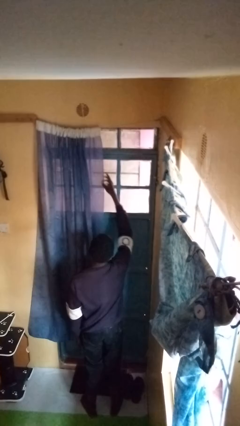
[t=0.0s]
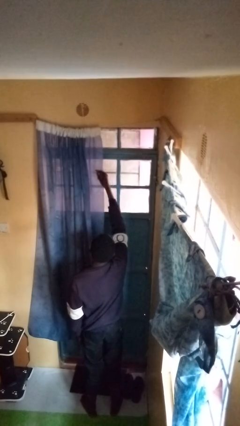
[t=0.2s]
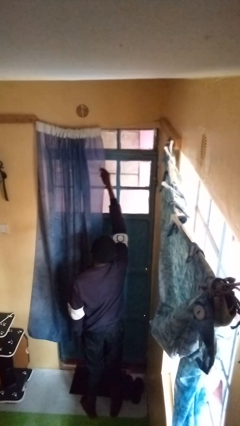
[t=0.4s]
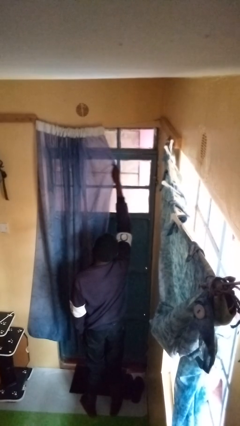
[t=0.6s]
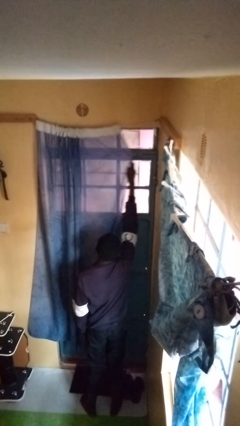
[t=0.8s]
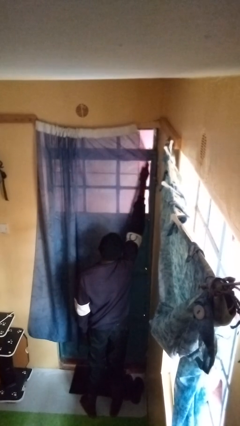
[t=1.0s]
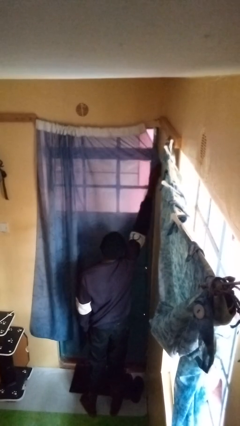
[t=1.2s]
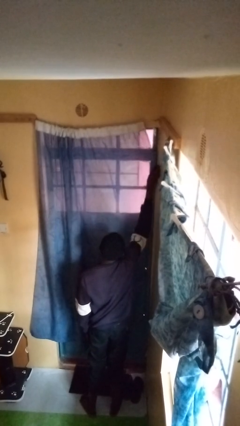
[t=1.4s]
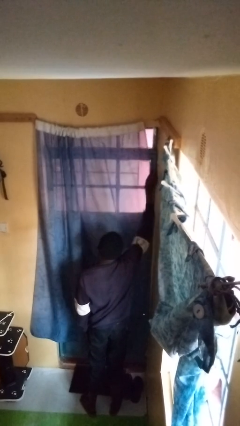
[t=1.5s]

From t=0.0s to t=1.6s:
person closes curtains

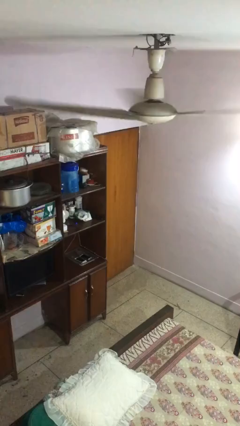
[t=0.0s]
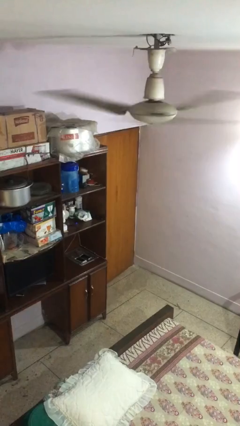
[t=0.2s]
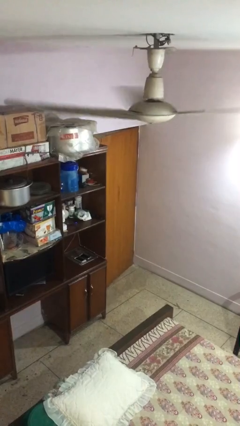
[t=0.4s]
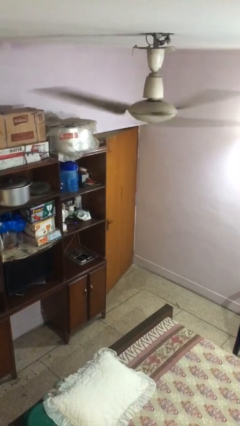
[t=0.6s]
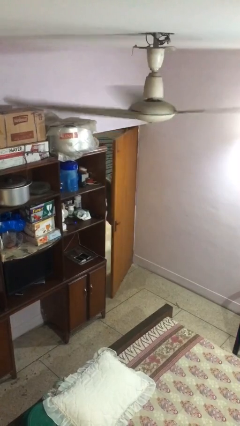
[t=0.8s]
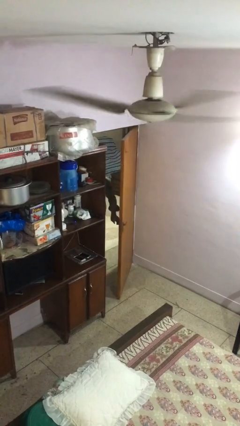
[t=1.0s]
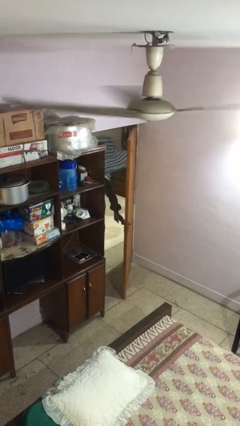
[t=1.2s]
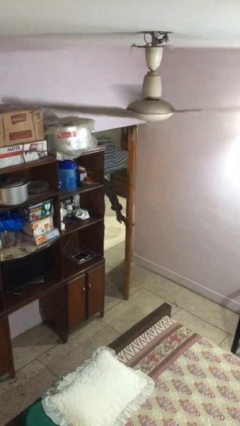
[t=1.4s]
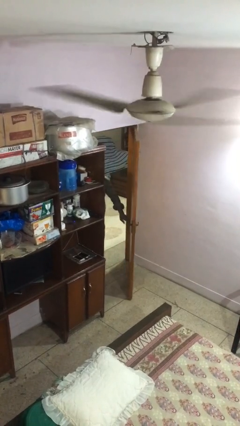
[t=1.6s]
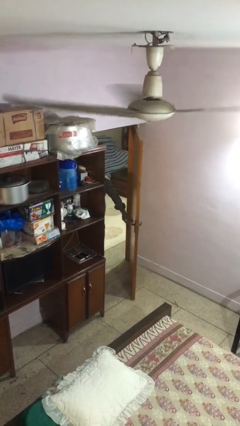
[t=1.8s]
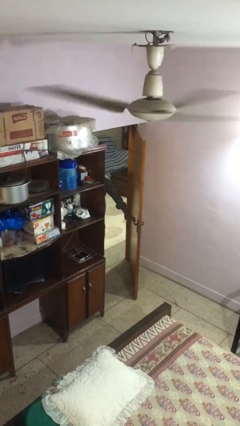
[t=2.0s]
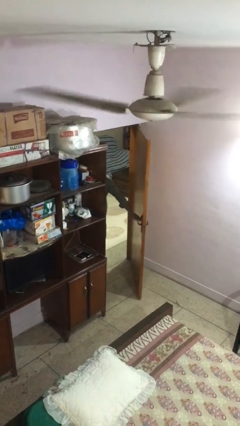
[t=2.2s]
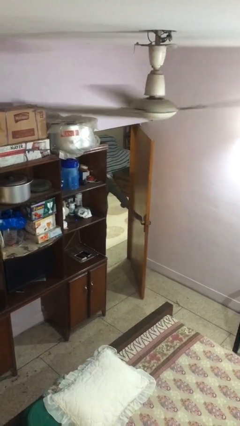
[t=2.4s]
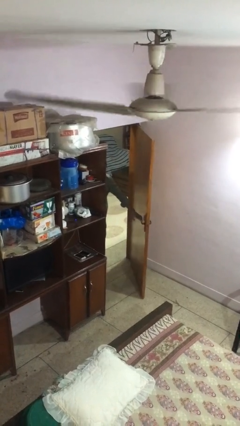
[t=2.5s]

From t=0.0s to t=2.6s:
person opens facility door

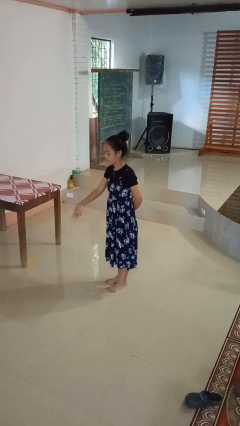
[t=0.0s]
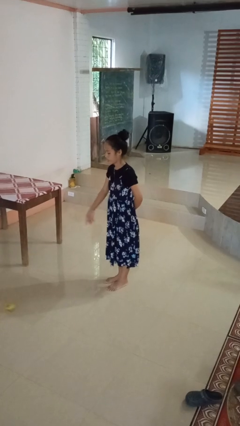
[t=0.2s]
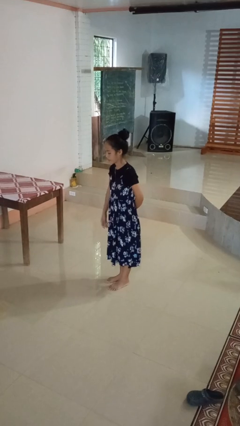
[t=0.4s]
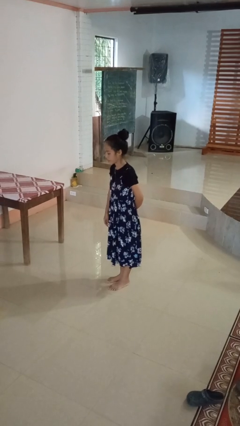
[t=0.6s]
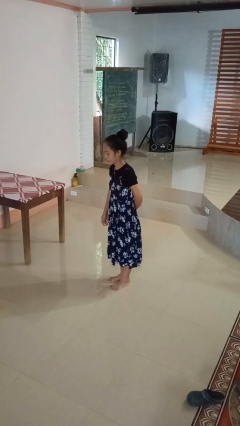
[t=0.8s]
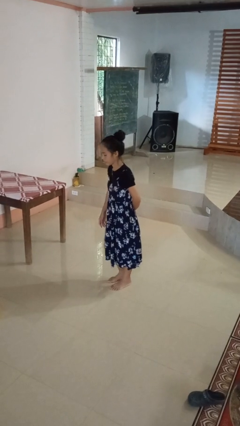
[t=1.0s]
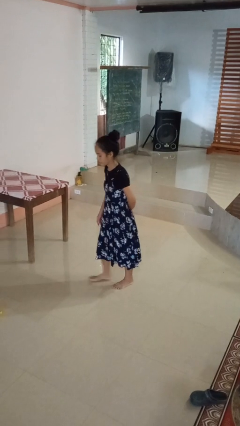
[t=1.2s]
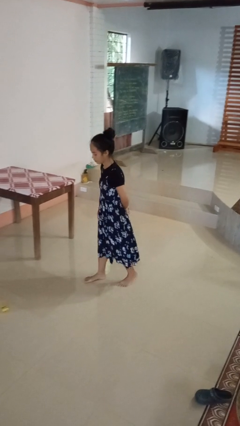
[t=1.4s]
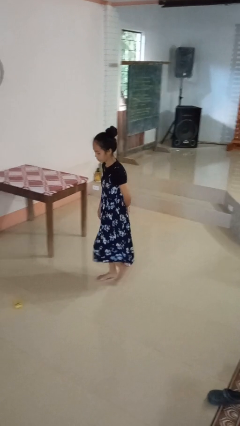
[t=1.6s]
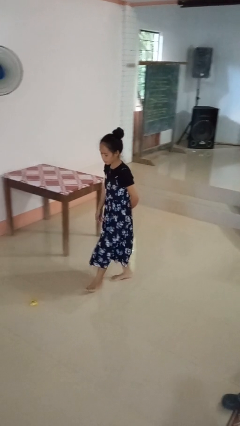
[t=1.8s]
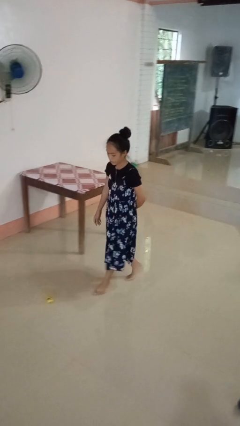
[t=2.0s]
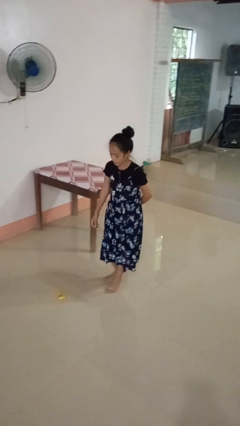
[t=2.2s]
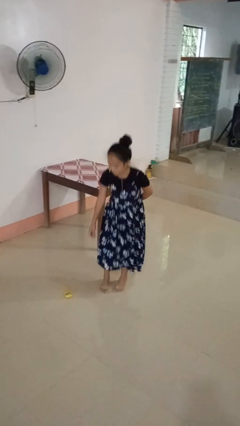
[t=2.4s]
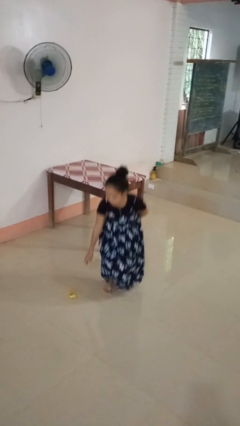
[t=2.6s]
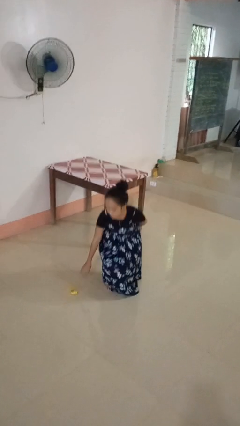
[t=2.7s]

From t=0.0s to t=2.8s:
person throws object to ground

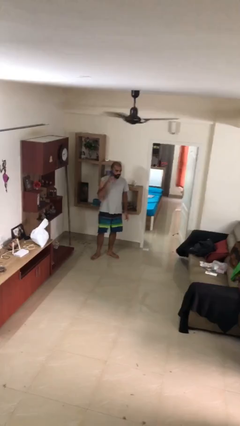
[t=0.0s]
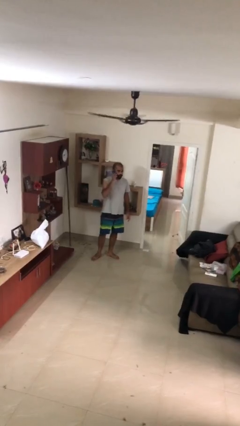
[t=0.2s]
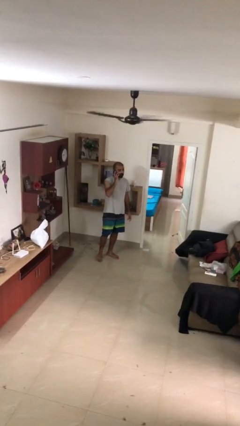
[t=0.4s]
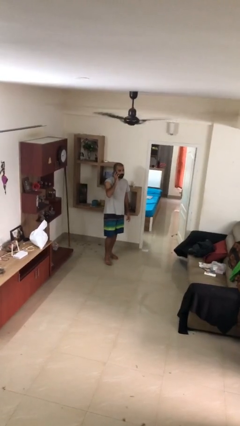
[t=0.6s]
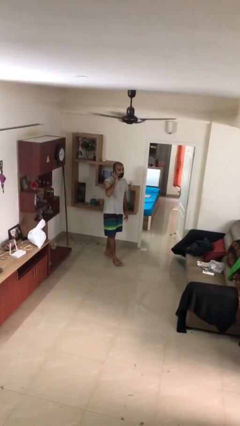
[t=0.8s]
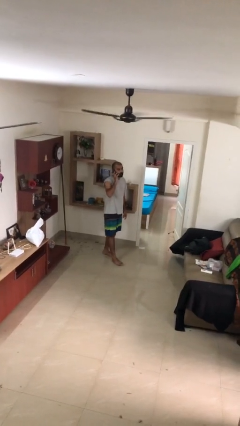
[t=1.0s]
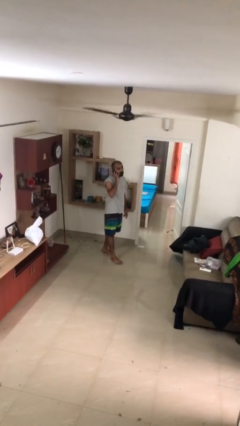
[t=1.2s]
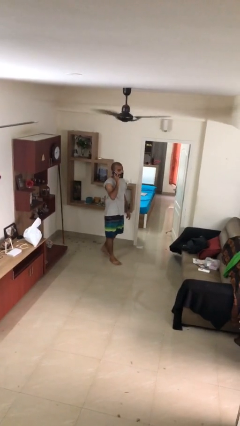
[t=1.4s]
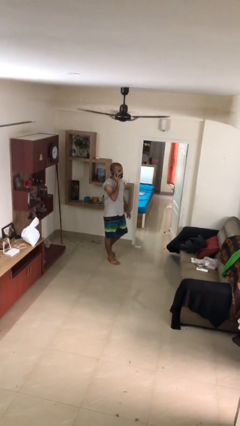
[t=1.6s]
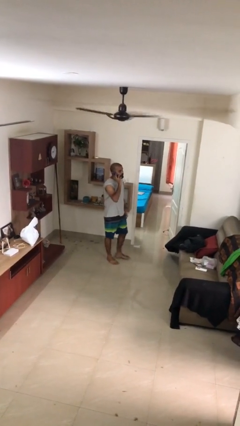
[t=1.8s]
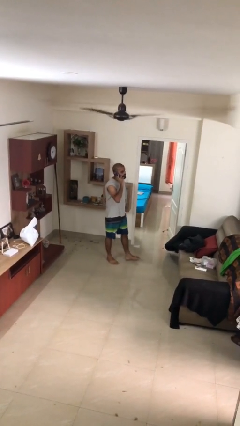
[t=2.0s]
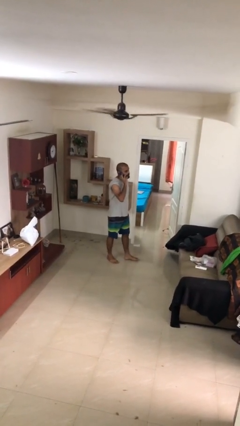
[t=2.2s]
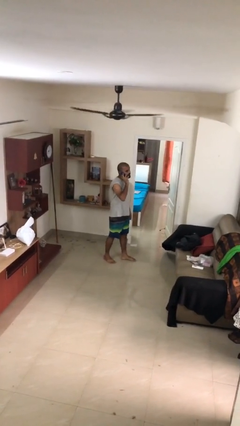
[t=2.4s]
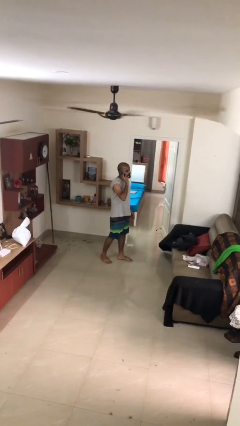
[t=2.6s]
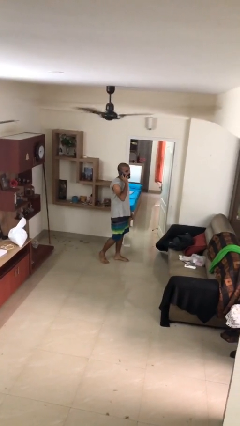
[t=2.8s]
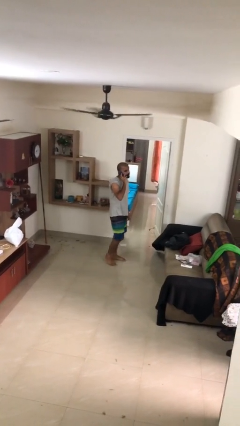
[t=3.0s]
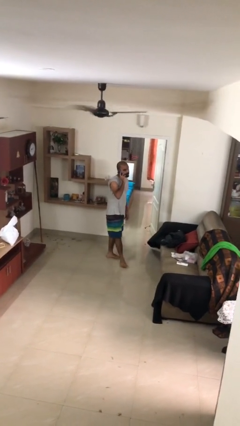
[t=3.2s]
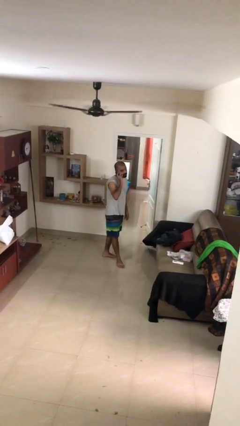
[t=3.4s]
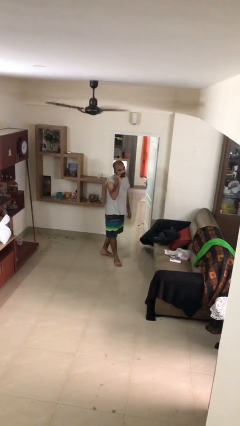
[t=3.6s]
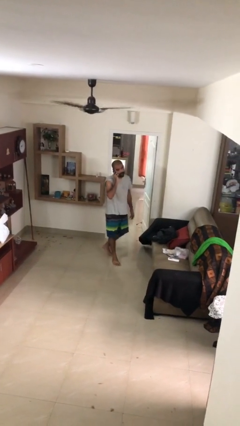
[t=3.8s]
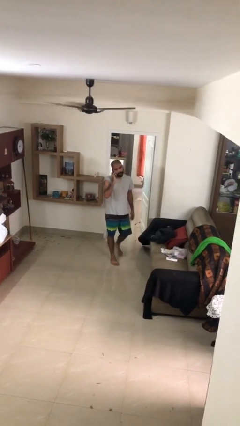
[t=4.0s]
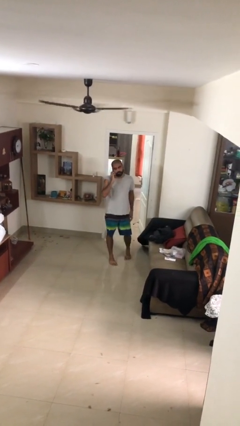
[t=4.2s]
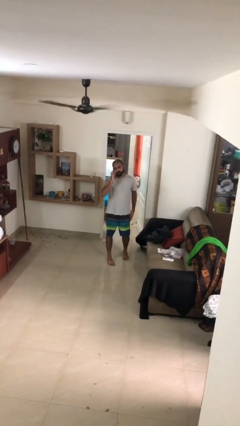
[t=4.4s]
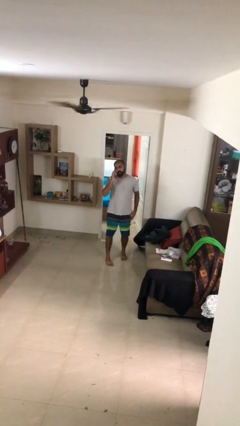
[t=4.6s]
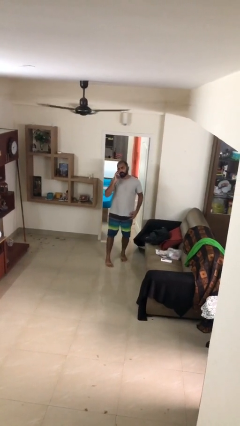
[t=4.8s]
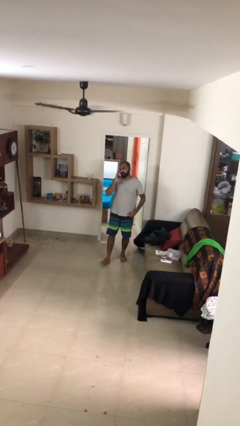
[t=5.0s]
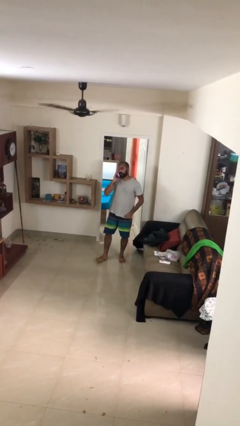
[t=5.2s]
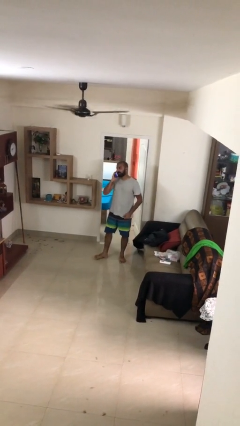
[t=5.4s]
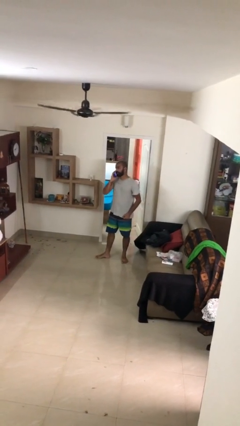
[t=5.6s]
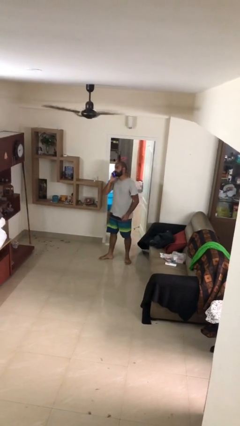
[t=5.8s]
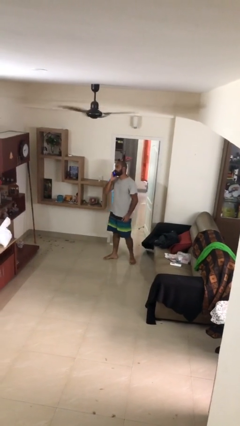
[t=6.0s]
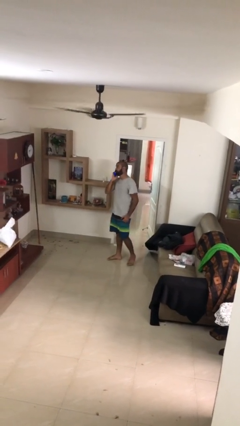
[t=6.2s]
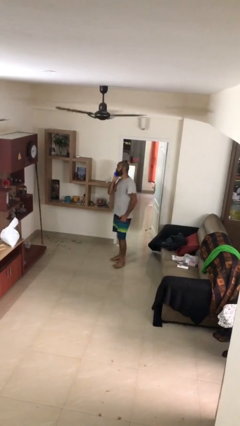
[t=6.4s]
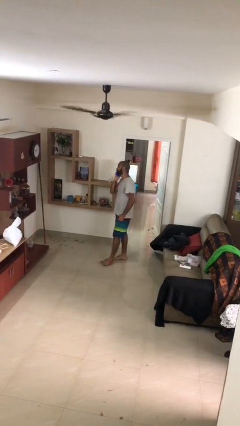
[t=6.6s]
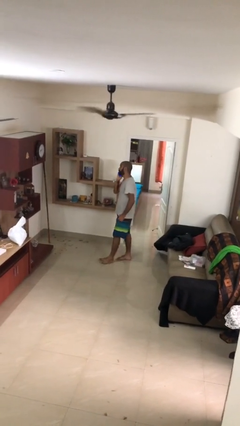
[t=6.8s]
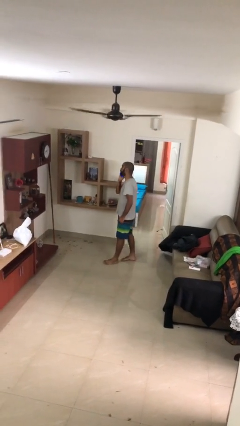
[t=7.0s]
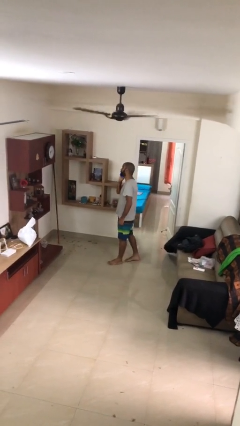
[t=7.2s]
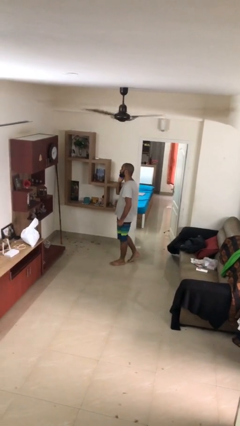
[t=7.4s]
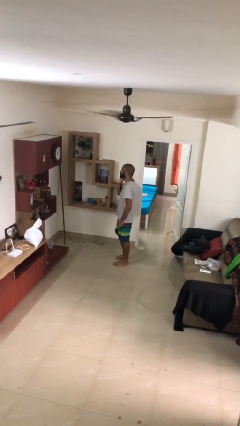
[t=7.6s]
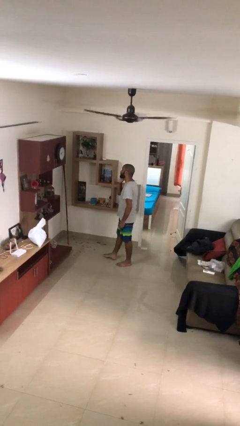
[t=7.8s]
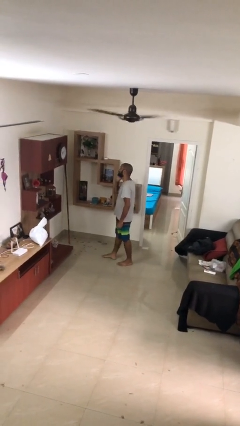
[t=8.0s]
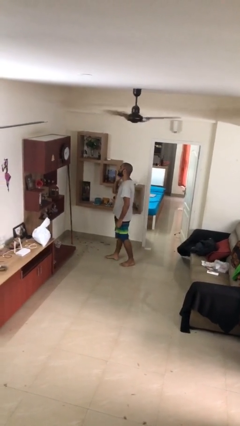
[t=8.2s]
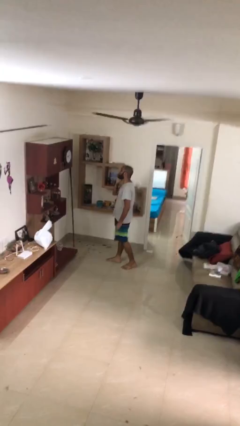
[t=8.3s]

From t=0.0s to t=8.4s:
person talks on phone

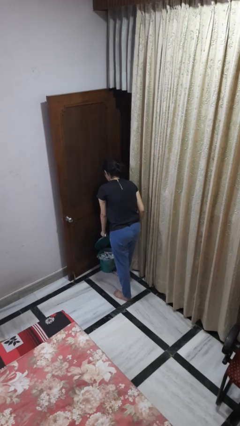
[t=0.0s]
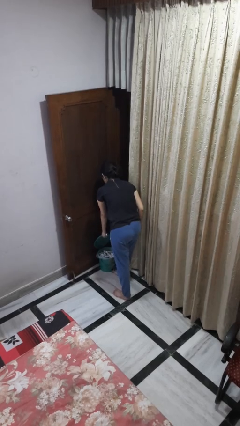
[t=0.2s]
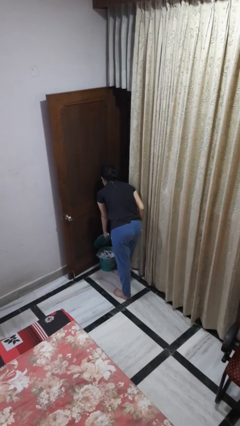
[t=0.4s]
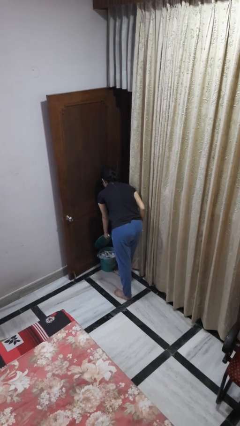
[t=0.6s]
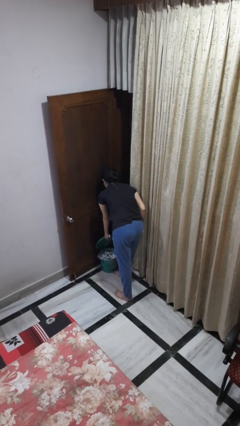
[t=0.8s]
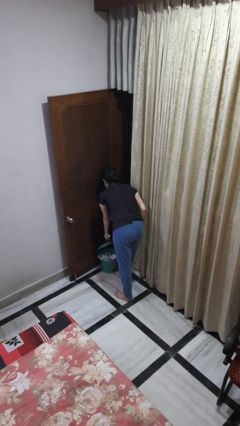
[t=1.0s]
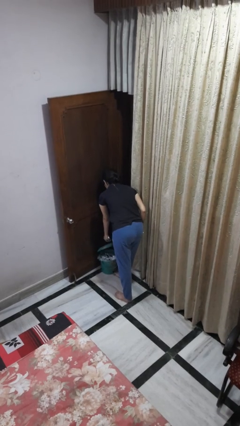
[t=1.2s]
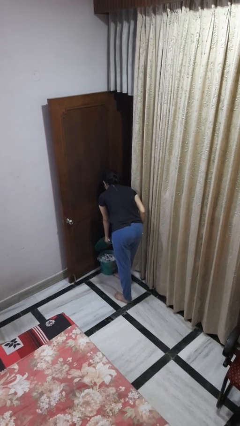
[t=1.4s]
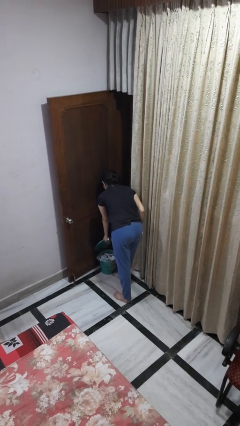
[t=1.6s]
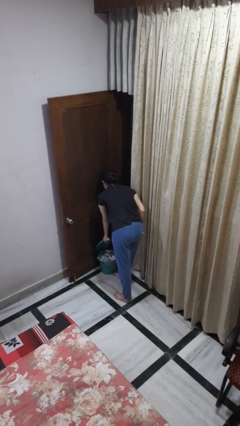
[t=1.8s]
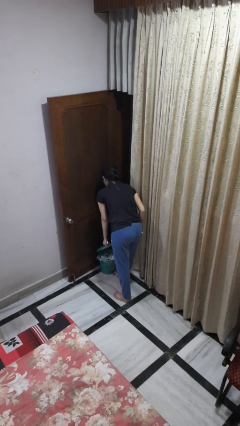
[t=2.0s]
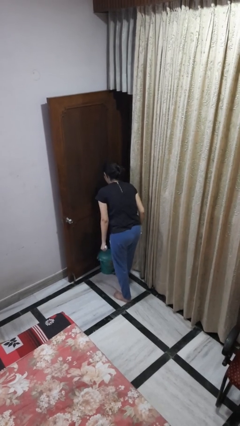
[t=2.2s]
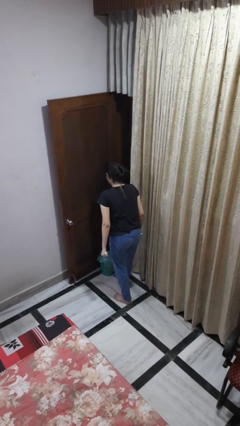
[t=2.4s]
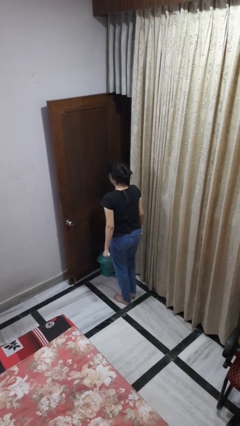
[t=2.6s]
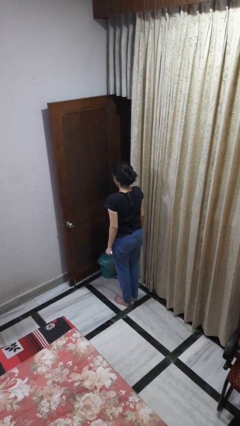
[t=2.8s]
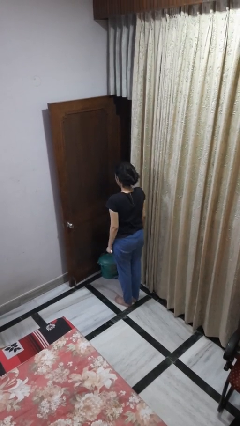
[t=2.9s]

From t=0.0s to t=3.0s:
person discards trash
